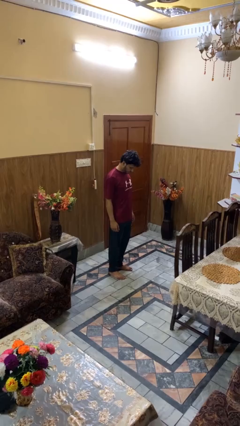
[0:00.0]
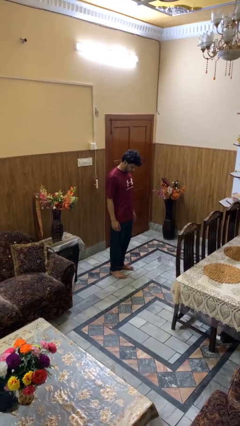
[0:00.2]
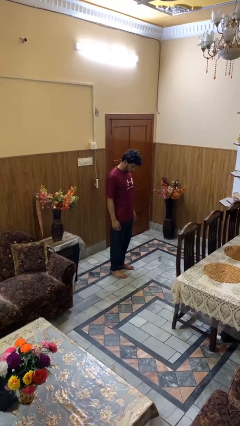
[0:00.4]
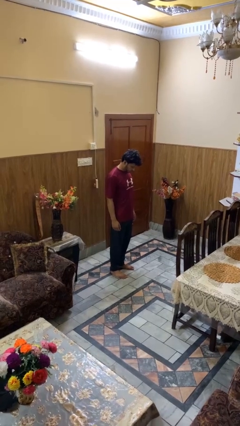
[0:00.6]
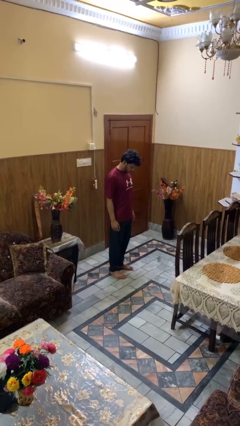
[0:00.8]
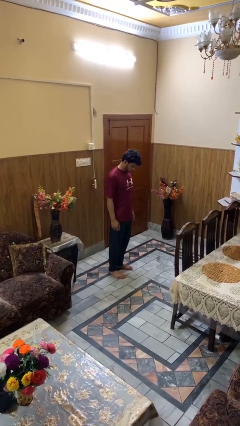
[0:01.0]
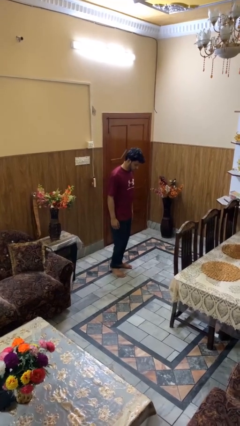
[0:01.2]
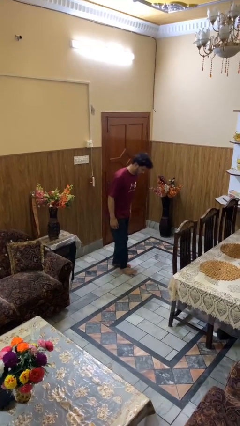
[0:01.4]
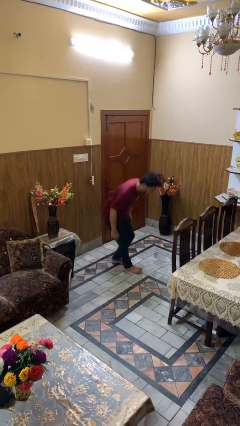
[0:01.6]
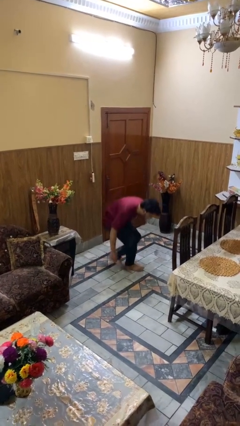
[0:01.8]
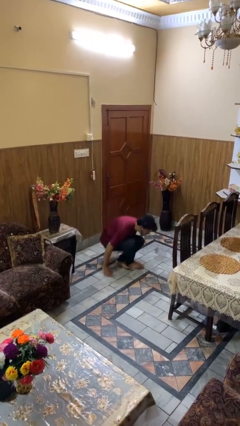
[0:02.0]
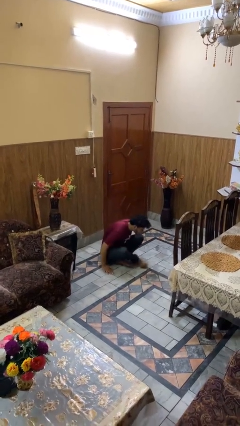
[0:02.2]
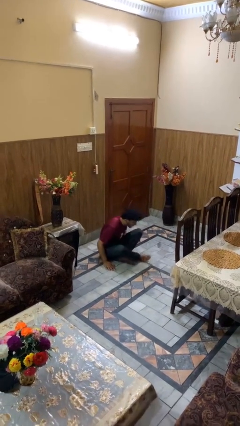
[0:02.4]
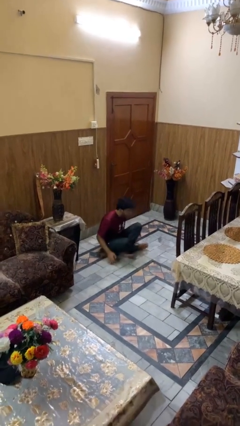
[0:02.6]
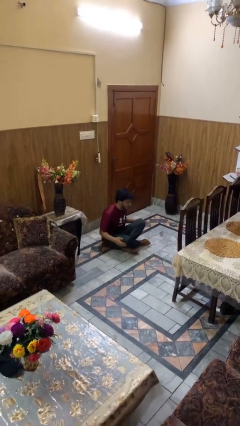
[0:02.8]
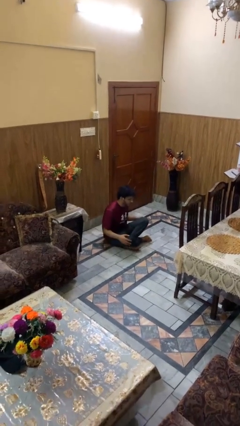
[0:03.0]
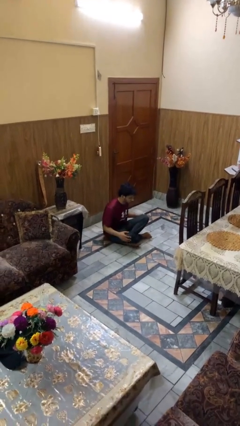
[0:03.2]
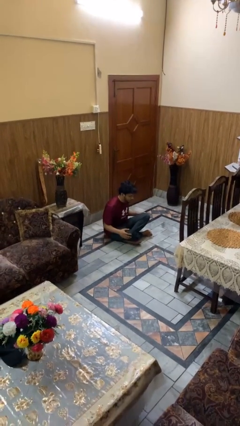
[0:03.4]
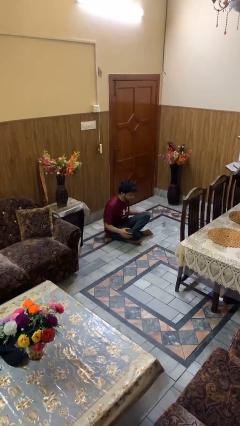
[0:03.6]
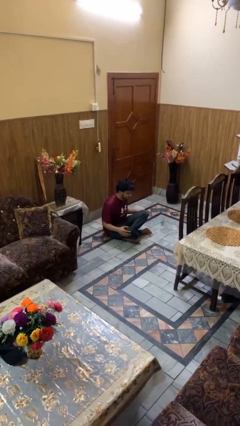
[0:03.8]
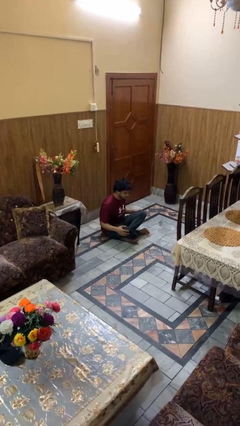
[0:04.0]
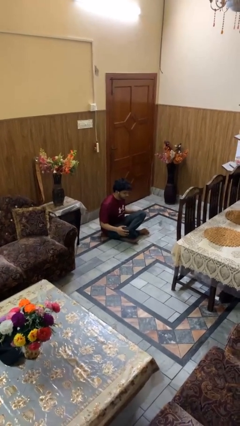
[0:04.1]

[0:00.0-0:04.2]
person sits crisscross

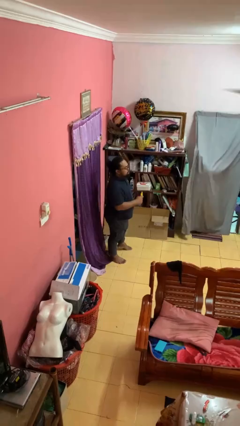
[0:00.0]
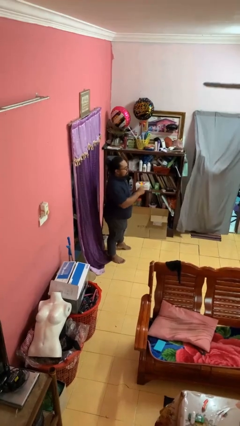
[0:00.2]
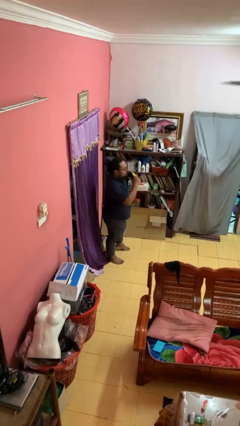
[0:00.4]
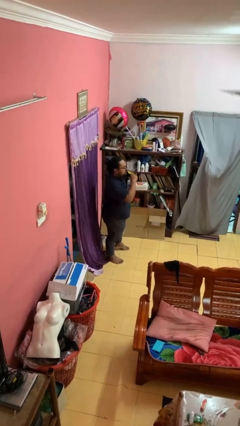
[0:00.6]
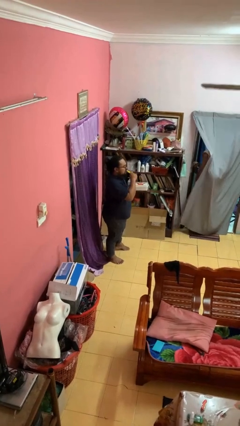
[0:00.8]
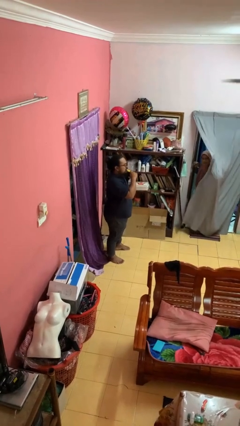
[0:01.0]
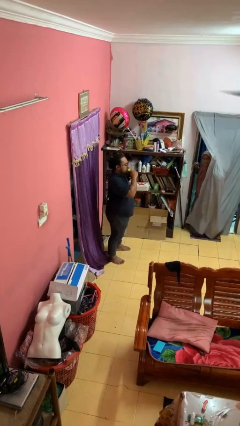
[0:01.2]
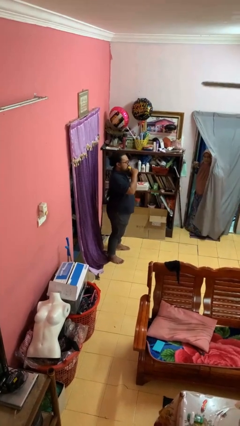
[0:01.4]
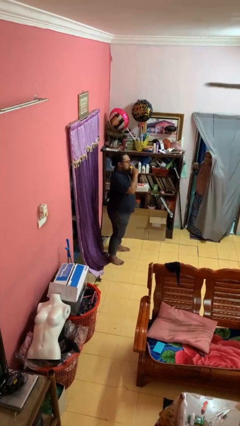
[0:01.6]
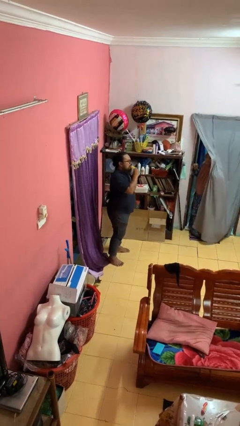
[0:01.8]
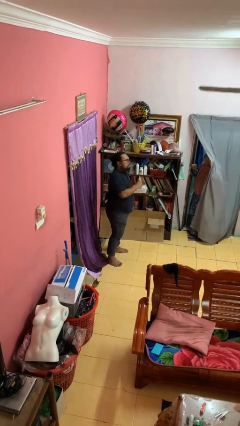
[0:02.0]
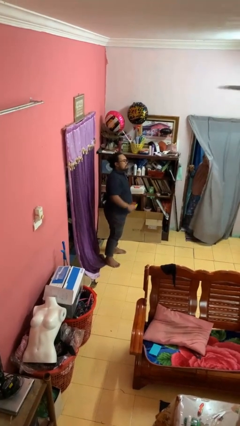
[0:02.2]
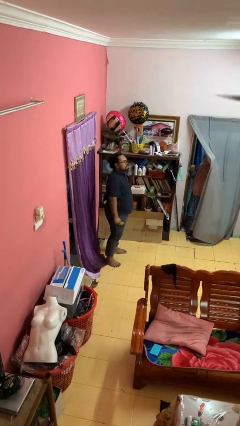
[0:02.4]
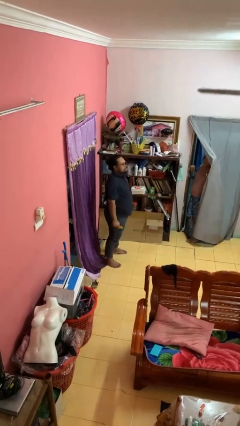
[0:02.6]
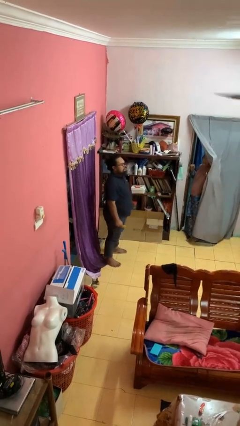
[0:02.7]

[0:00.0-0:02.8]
person eats banana

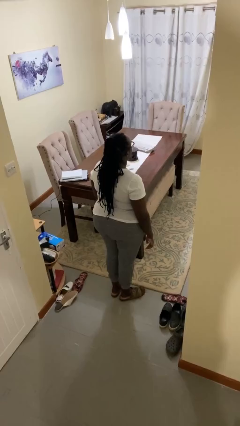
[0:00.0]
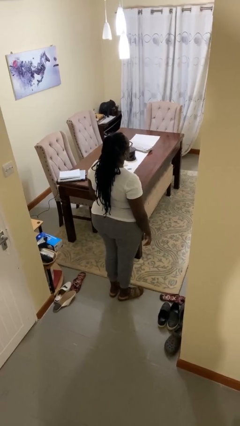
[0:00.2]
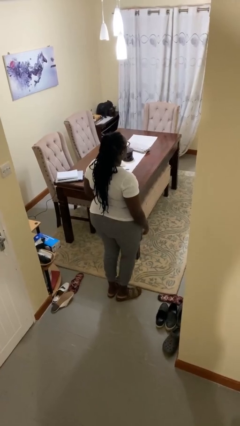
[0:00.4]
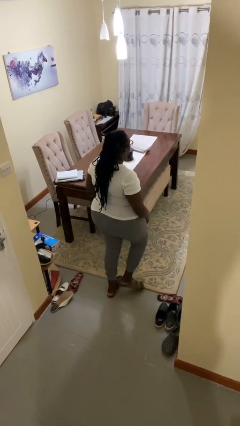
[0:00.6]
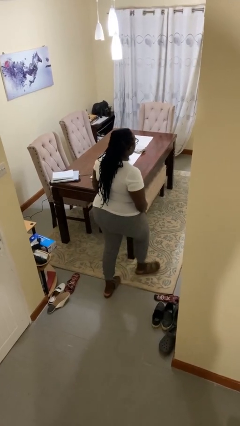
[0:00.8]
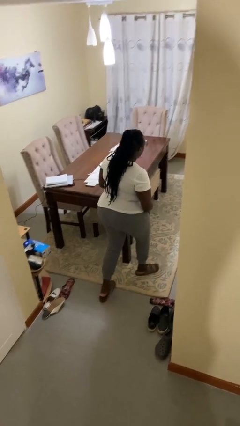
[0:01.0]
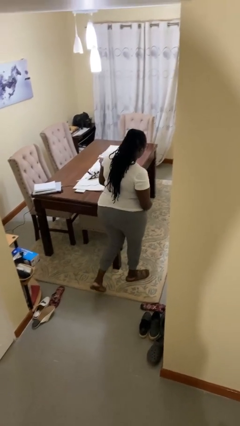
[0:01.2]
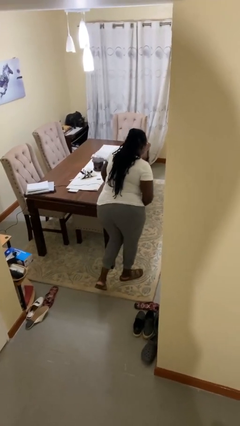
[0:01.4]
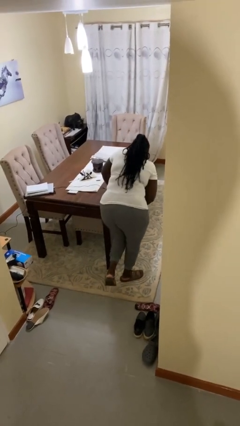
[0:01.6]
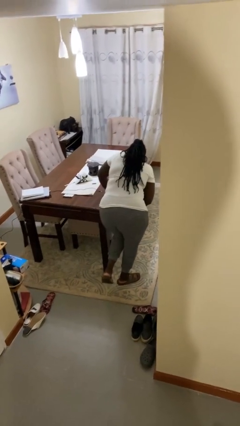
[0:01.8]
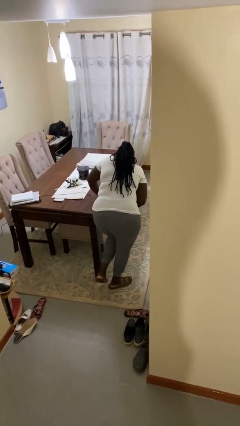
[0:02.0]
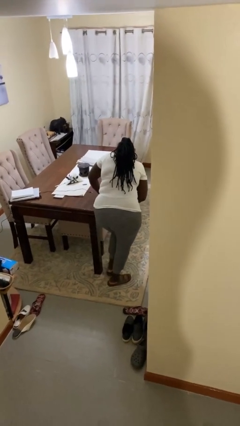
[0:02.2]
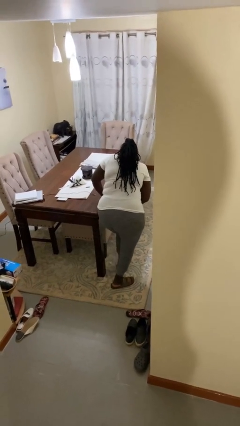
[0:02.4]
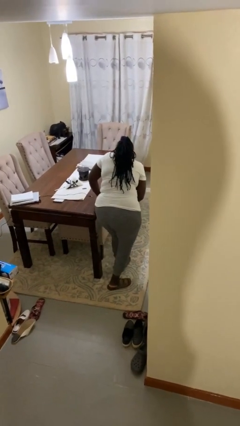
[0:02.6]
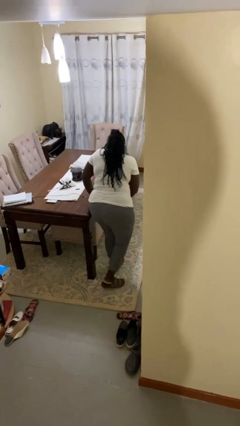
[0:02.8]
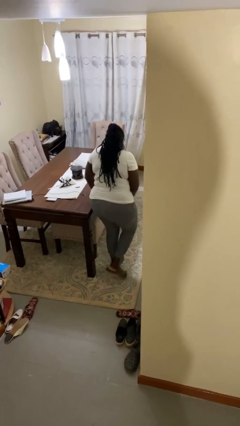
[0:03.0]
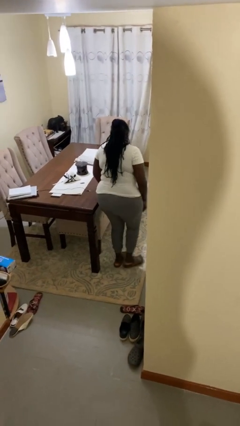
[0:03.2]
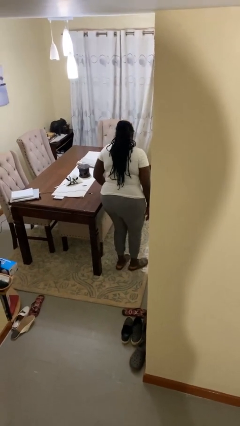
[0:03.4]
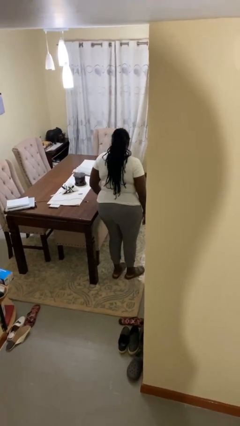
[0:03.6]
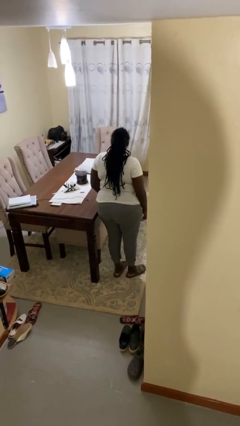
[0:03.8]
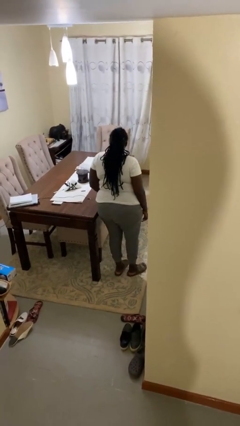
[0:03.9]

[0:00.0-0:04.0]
person bumps into table

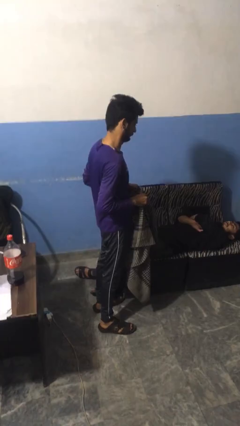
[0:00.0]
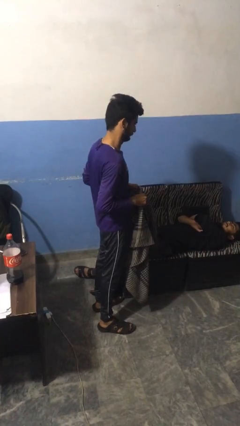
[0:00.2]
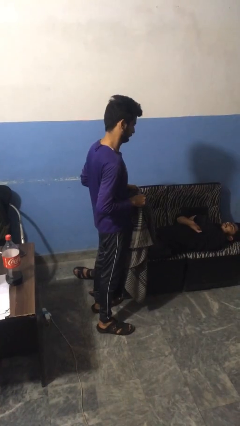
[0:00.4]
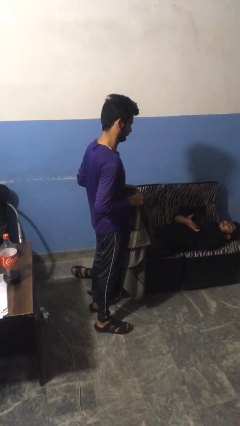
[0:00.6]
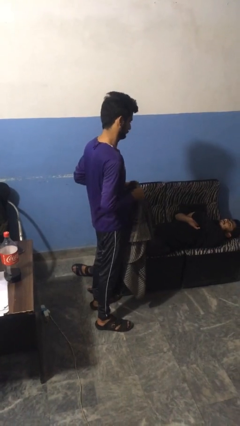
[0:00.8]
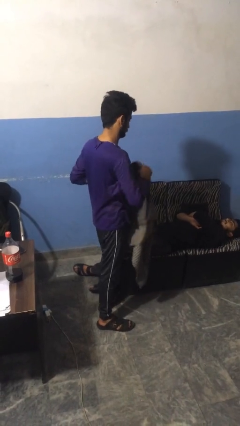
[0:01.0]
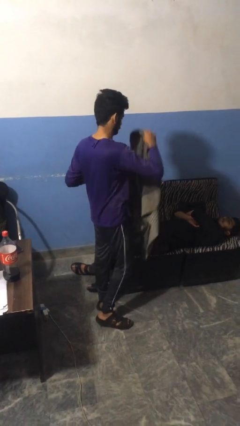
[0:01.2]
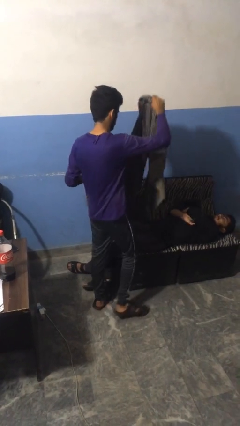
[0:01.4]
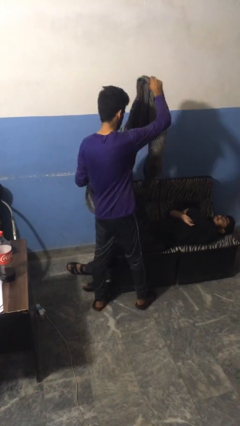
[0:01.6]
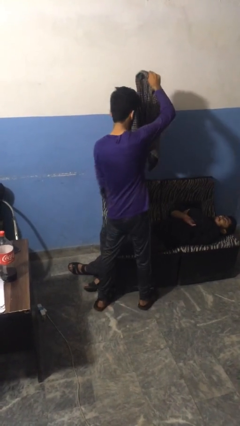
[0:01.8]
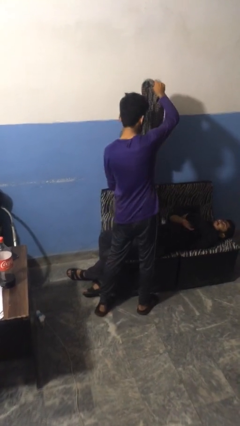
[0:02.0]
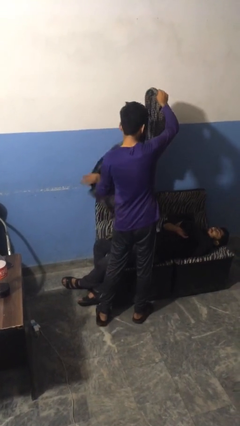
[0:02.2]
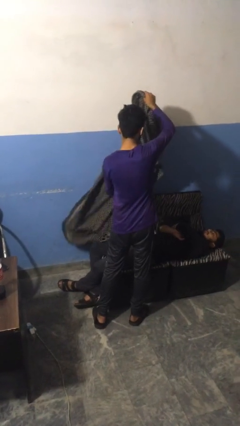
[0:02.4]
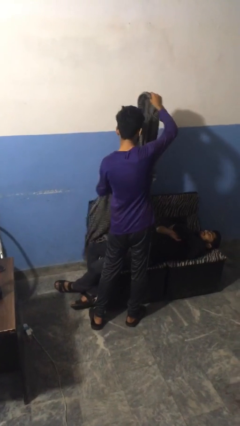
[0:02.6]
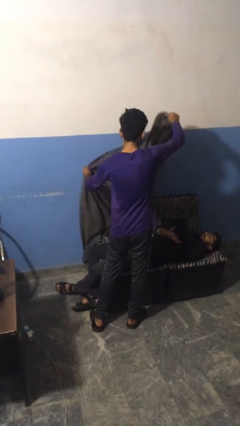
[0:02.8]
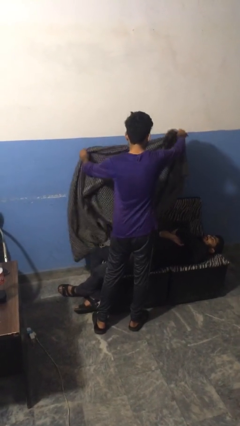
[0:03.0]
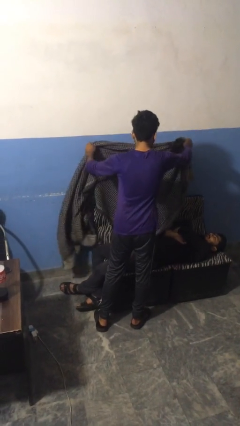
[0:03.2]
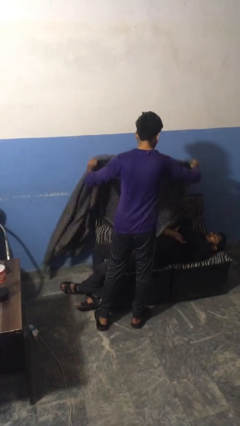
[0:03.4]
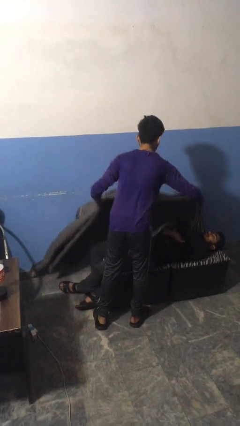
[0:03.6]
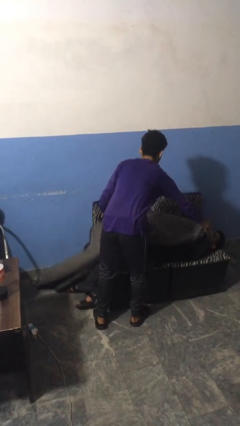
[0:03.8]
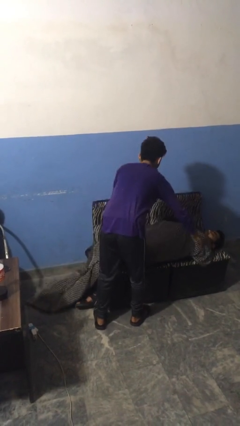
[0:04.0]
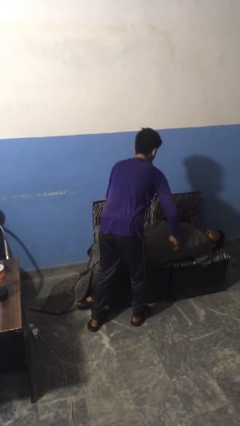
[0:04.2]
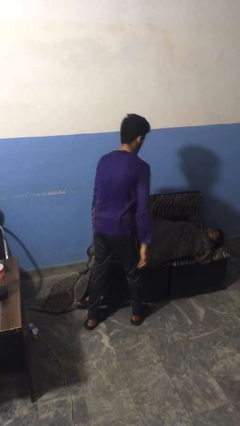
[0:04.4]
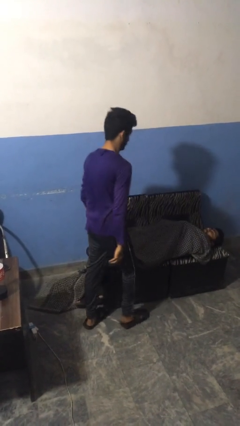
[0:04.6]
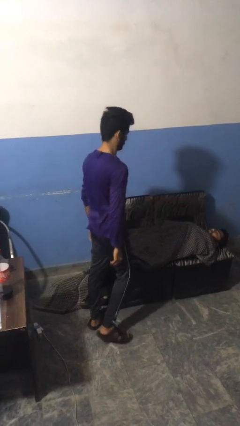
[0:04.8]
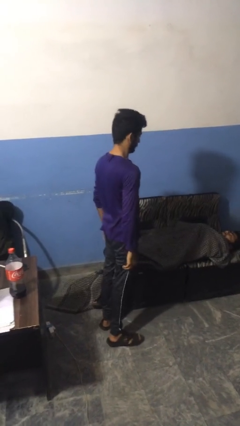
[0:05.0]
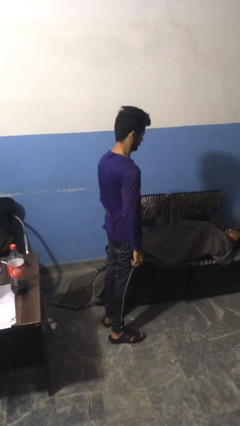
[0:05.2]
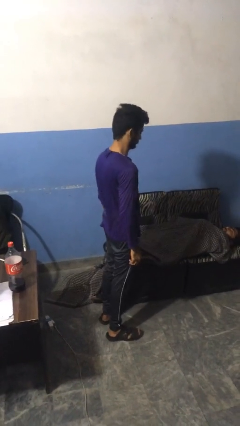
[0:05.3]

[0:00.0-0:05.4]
person covers friend with blanket

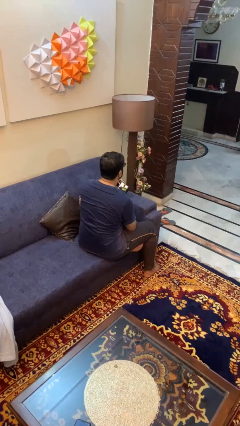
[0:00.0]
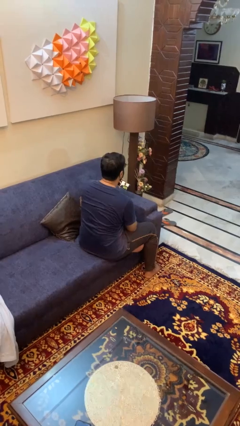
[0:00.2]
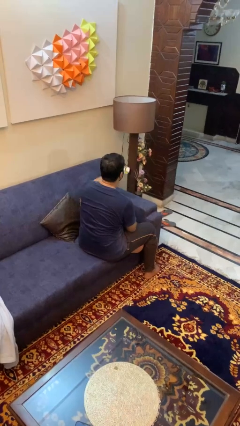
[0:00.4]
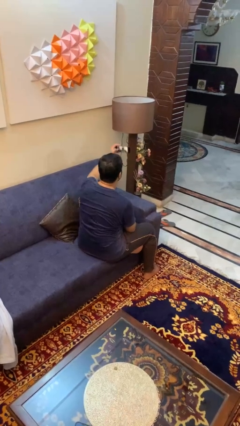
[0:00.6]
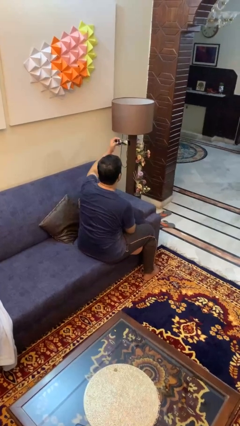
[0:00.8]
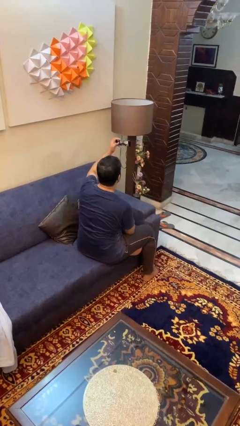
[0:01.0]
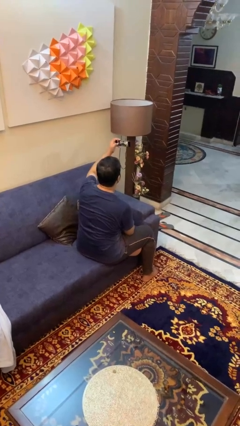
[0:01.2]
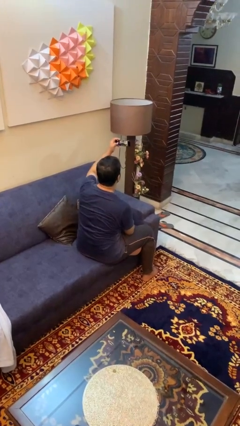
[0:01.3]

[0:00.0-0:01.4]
person takes selfie

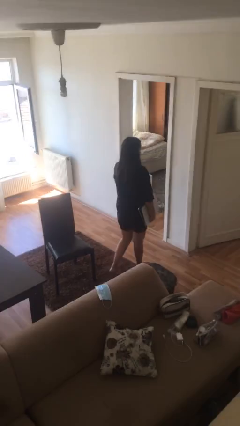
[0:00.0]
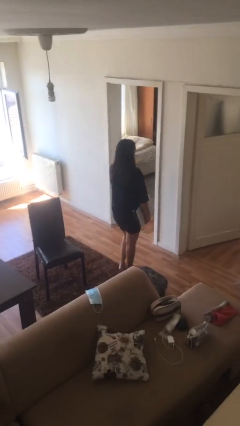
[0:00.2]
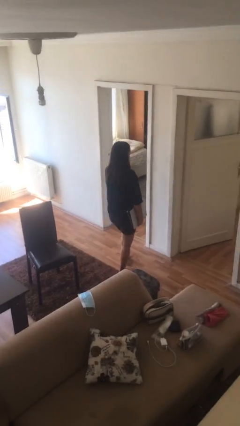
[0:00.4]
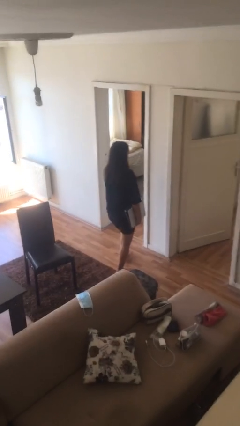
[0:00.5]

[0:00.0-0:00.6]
person interacts with laptop
